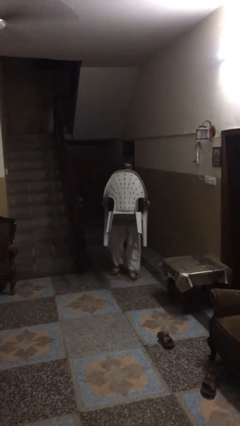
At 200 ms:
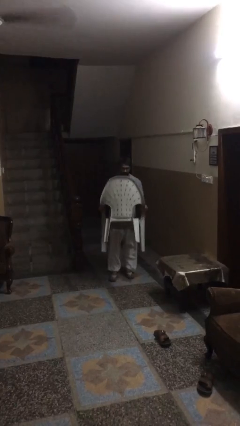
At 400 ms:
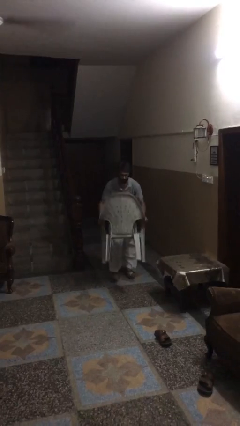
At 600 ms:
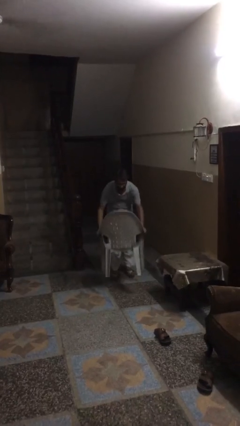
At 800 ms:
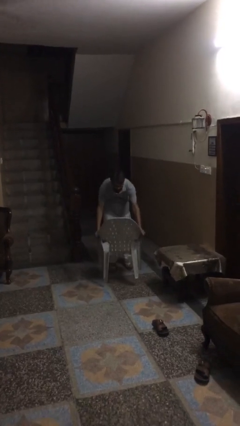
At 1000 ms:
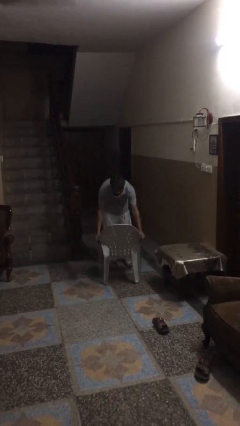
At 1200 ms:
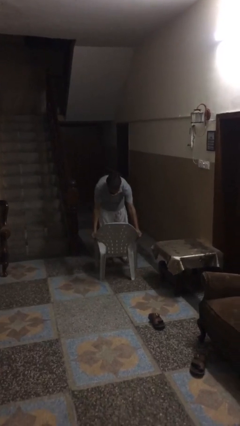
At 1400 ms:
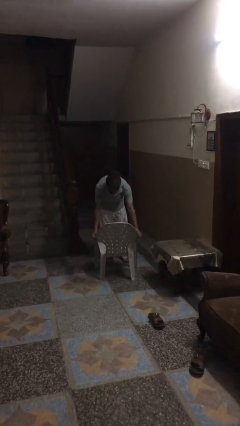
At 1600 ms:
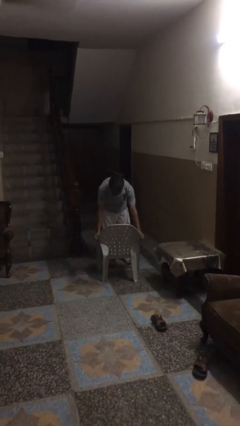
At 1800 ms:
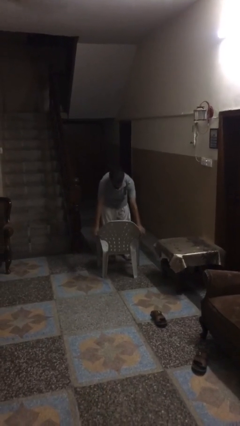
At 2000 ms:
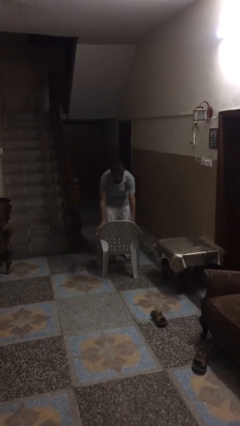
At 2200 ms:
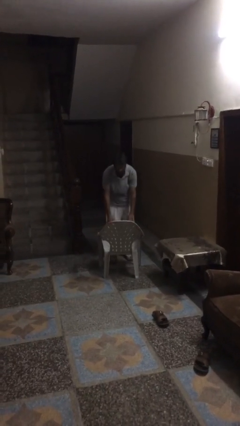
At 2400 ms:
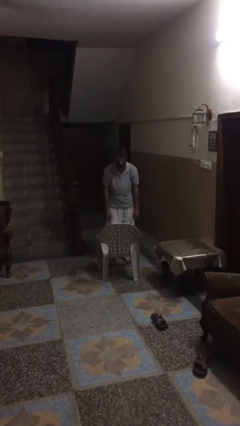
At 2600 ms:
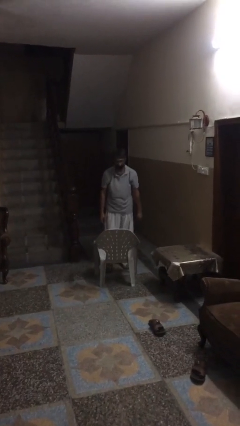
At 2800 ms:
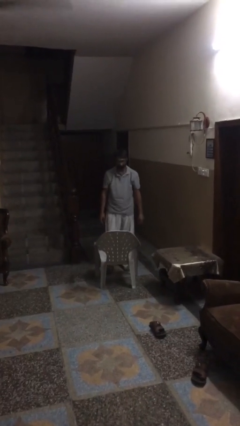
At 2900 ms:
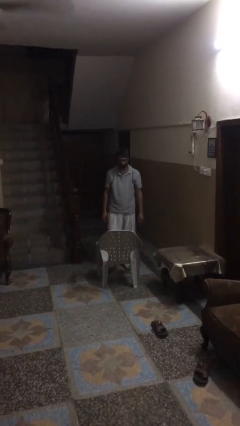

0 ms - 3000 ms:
person puts down object on floor

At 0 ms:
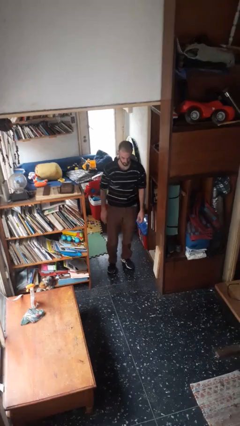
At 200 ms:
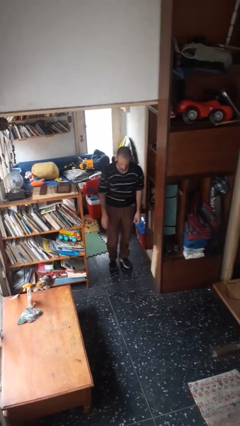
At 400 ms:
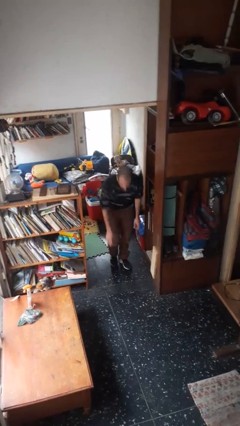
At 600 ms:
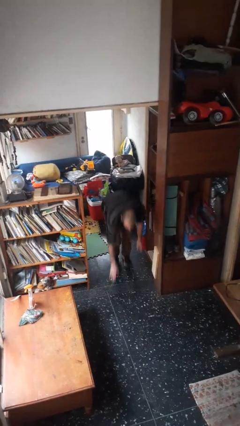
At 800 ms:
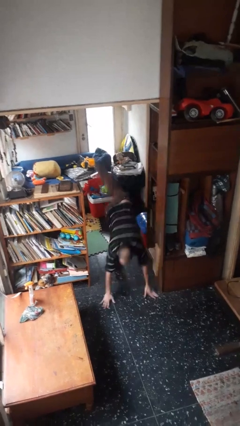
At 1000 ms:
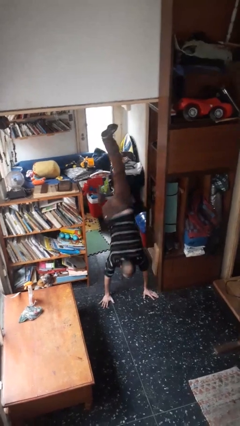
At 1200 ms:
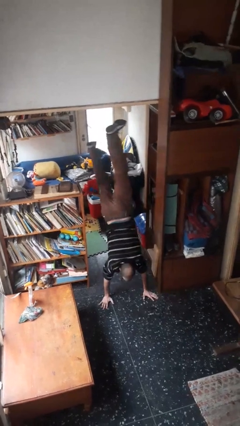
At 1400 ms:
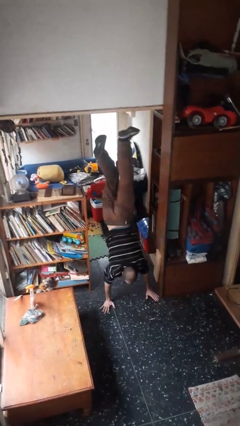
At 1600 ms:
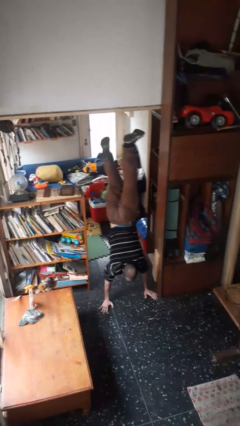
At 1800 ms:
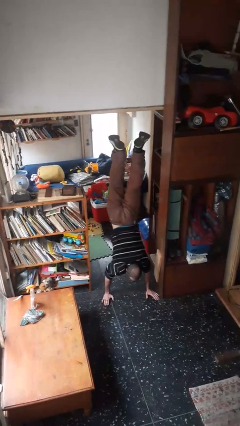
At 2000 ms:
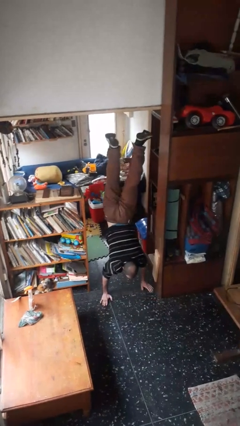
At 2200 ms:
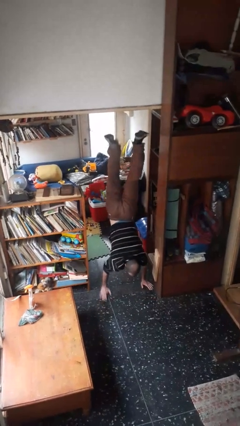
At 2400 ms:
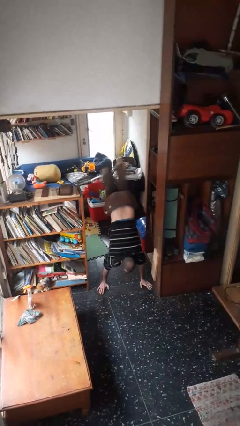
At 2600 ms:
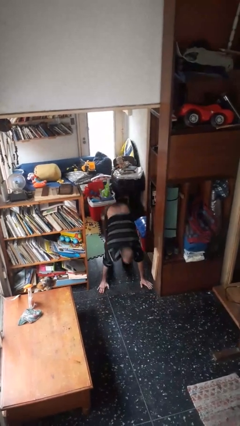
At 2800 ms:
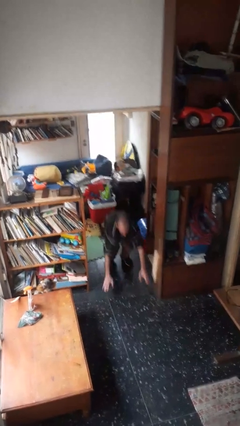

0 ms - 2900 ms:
person handstand

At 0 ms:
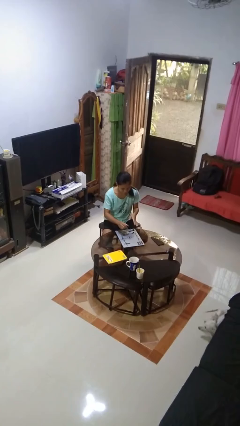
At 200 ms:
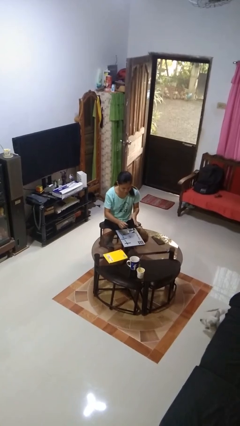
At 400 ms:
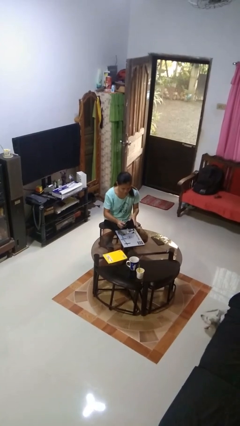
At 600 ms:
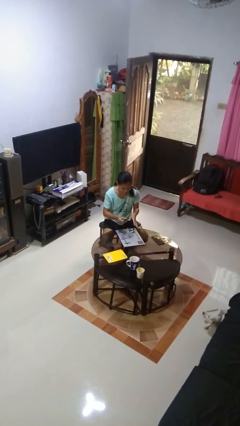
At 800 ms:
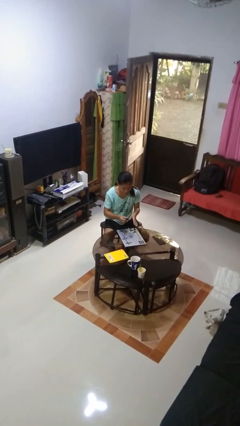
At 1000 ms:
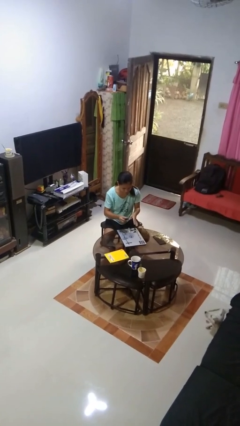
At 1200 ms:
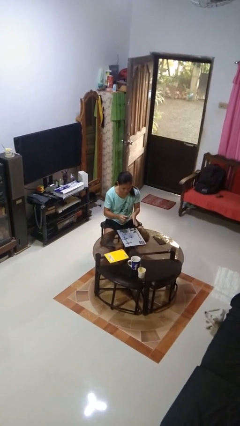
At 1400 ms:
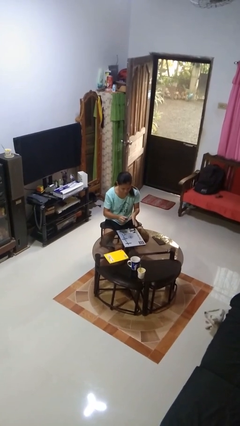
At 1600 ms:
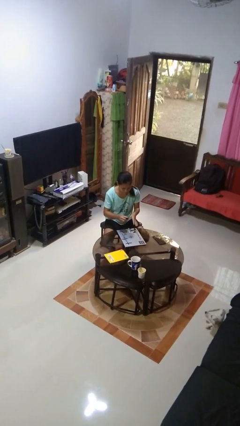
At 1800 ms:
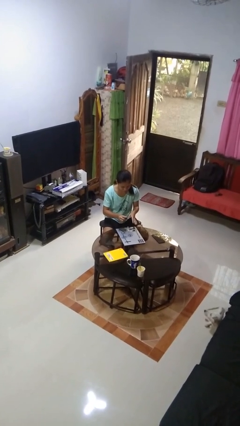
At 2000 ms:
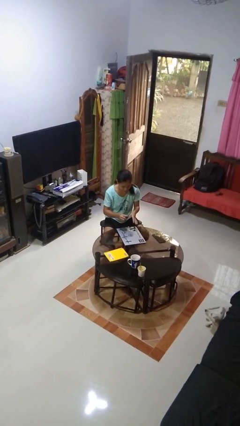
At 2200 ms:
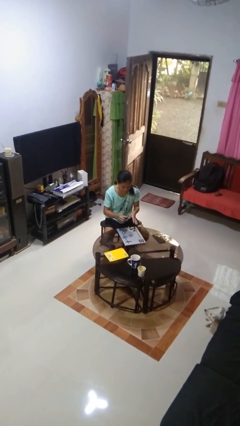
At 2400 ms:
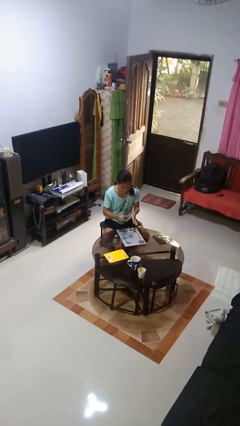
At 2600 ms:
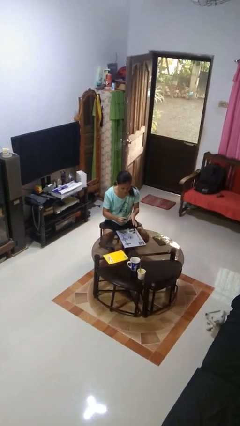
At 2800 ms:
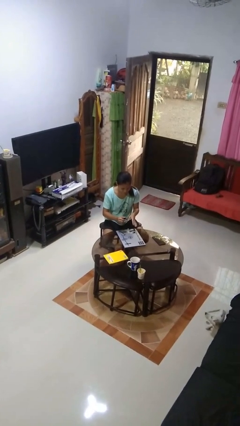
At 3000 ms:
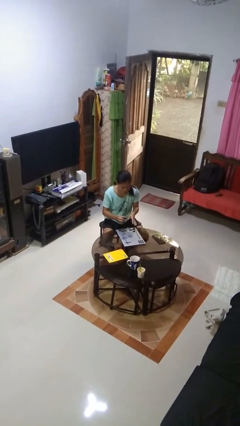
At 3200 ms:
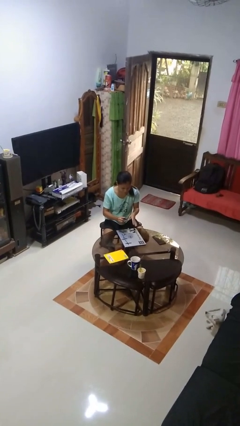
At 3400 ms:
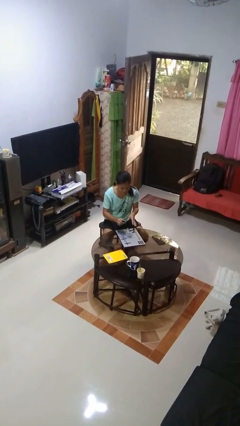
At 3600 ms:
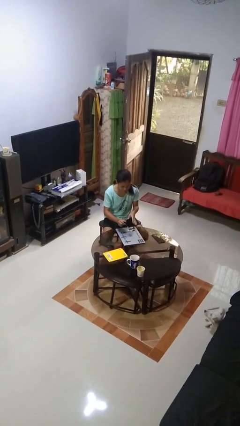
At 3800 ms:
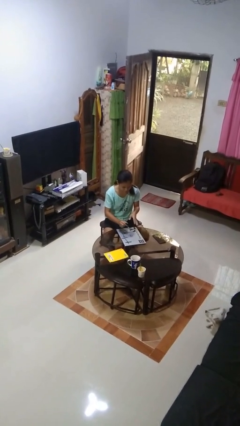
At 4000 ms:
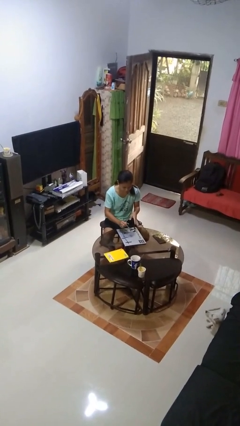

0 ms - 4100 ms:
person paints fingernails

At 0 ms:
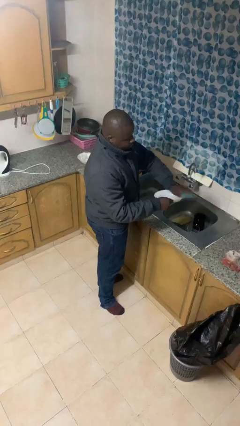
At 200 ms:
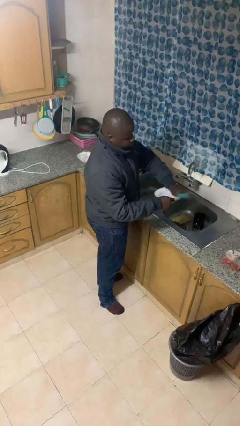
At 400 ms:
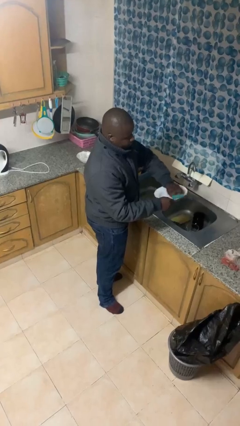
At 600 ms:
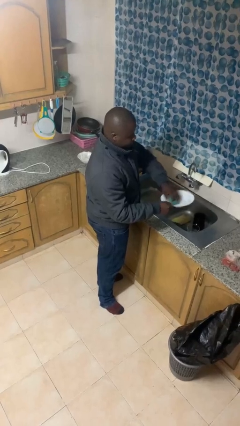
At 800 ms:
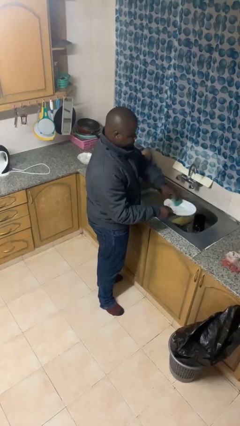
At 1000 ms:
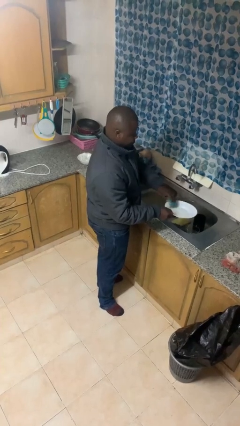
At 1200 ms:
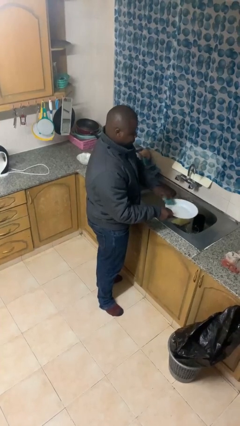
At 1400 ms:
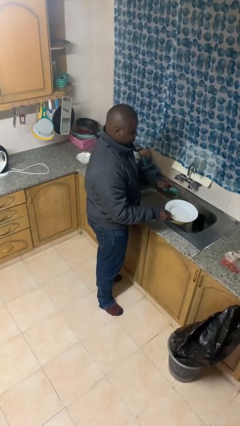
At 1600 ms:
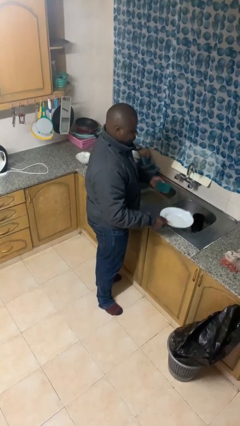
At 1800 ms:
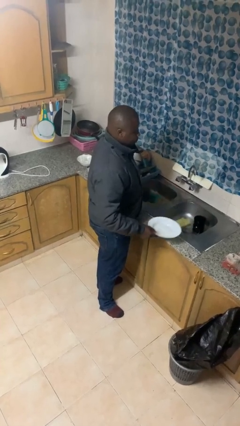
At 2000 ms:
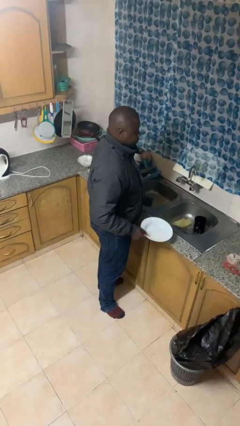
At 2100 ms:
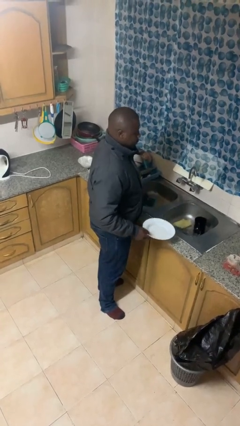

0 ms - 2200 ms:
person washes dish

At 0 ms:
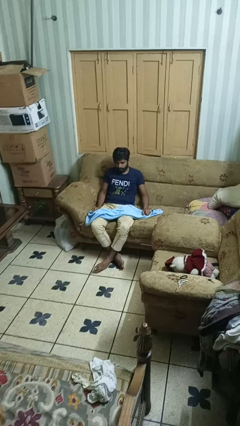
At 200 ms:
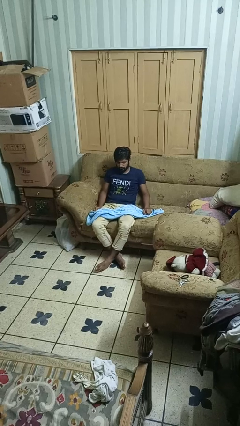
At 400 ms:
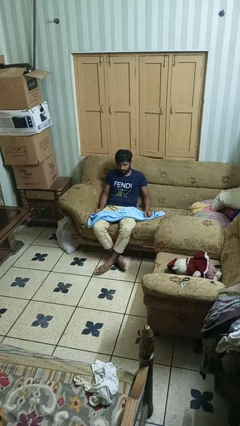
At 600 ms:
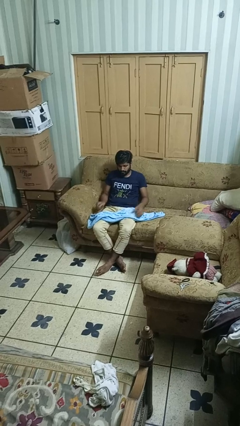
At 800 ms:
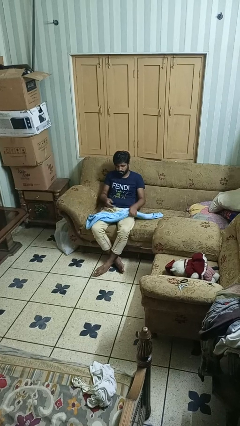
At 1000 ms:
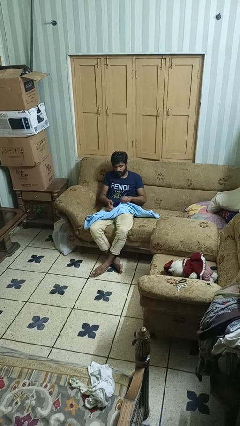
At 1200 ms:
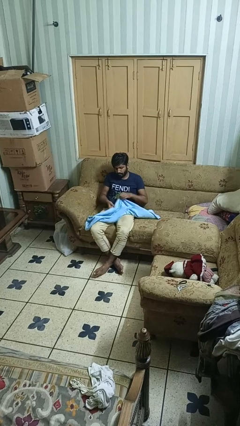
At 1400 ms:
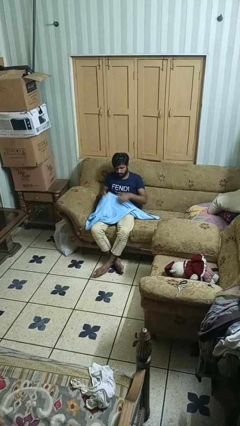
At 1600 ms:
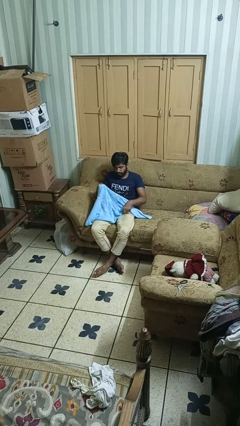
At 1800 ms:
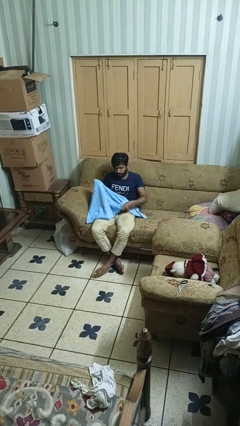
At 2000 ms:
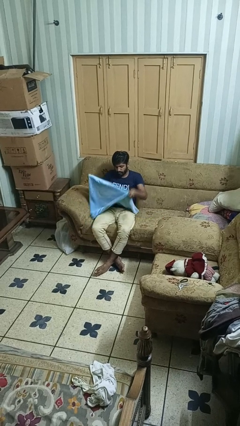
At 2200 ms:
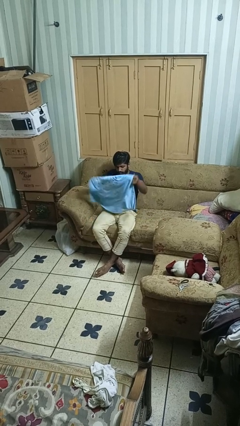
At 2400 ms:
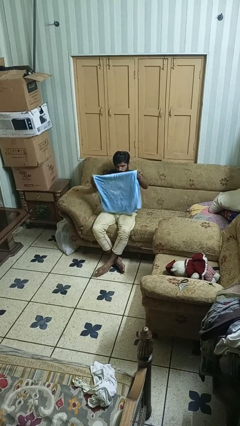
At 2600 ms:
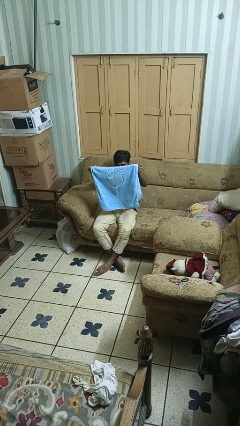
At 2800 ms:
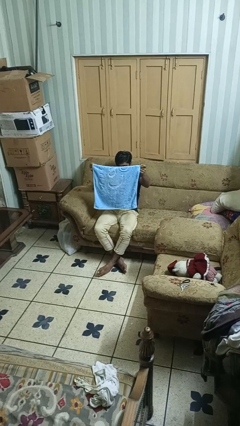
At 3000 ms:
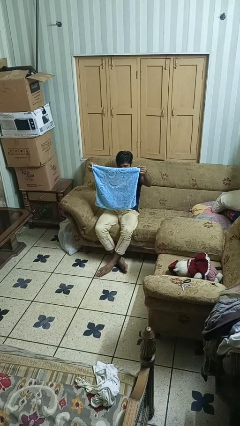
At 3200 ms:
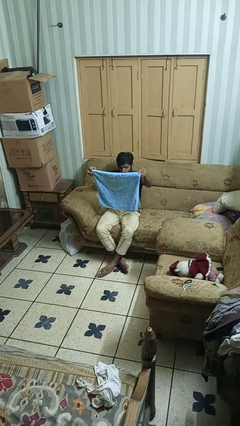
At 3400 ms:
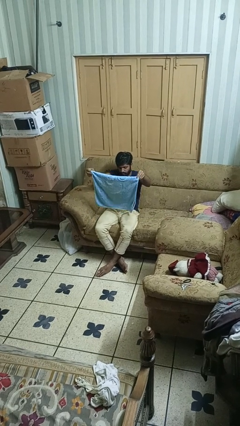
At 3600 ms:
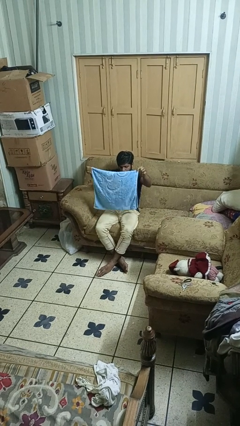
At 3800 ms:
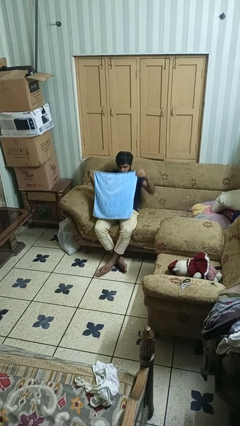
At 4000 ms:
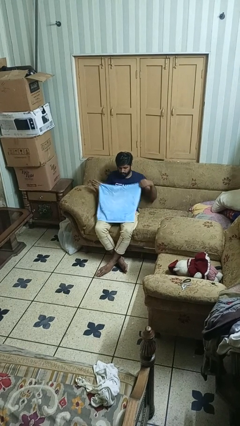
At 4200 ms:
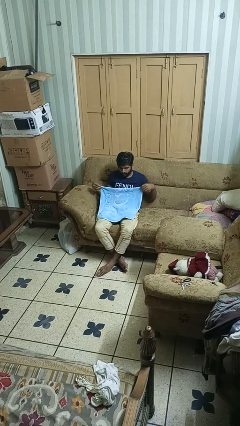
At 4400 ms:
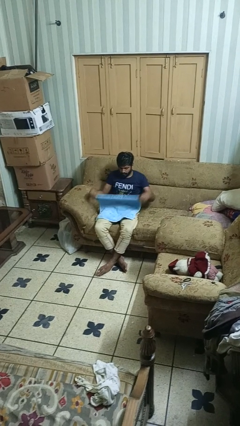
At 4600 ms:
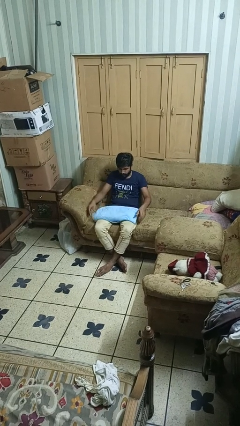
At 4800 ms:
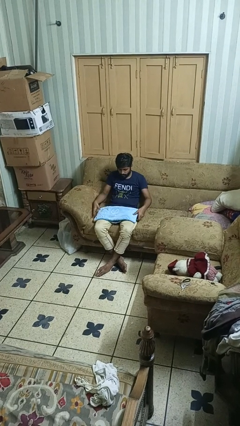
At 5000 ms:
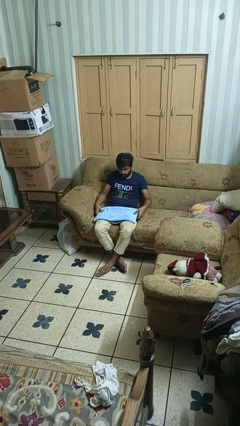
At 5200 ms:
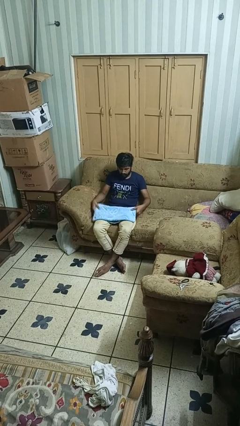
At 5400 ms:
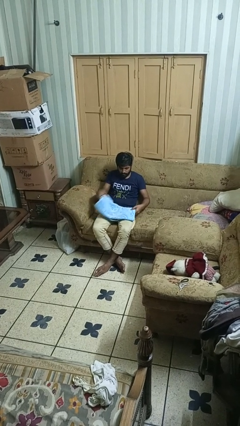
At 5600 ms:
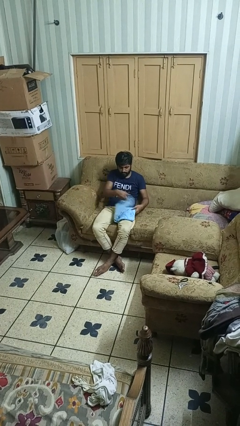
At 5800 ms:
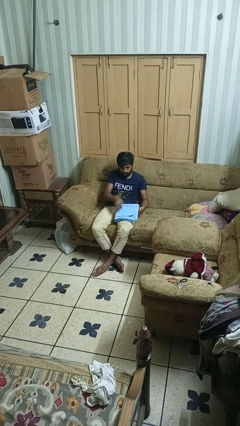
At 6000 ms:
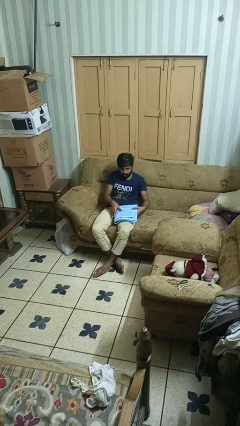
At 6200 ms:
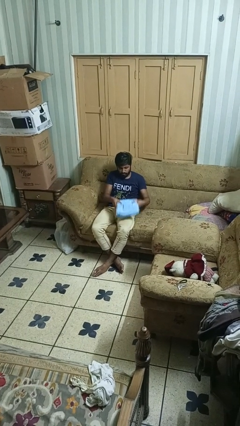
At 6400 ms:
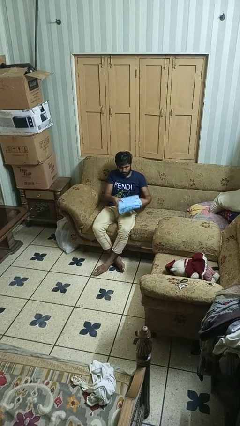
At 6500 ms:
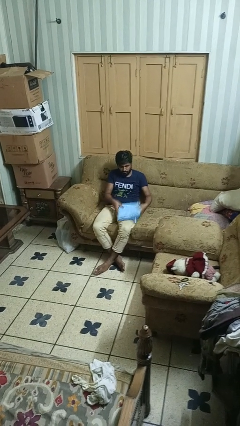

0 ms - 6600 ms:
person folds towel
